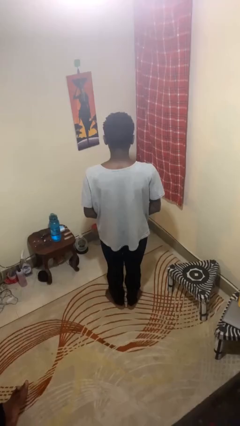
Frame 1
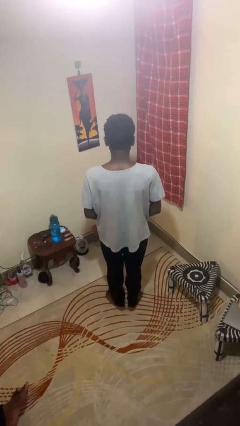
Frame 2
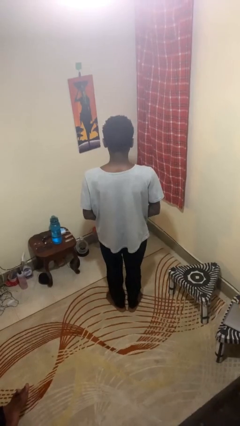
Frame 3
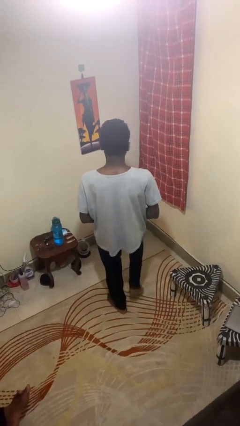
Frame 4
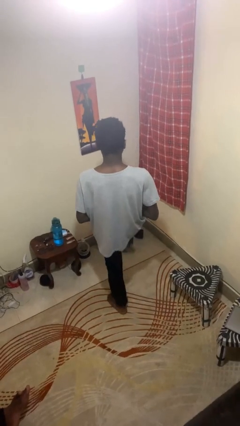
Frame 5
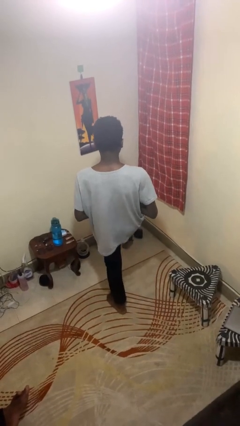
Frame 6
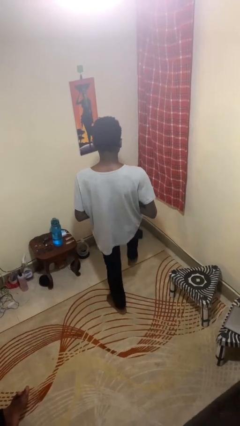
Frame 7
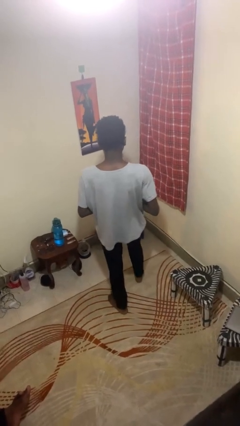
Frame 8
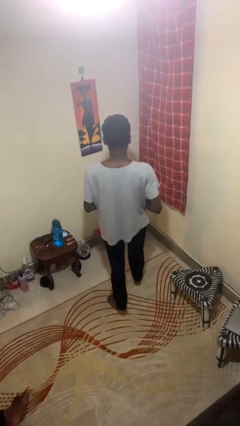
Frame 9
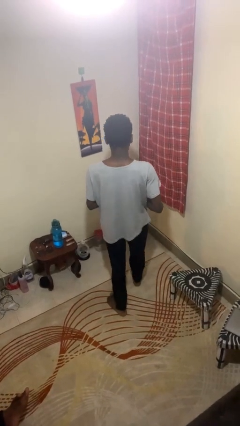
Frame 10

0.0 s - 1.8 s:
person karate kicks

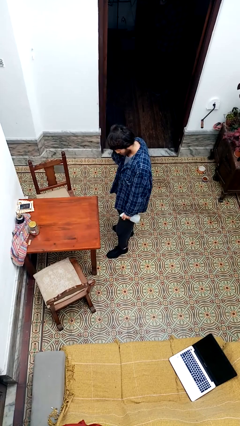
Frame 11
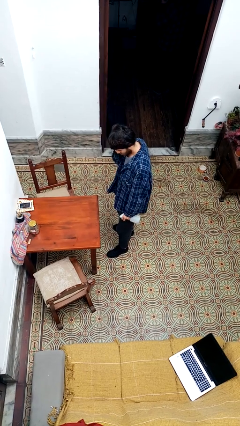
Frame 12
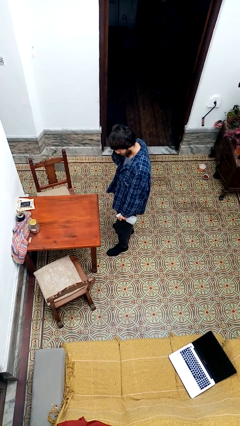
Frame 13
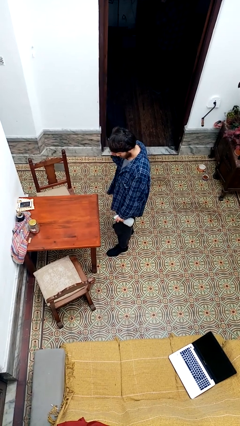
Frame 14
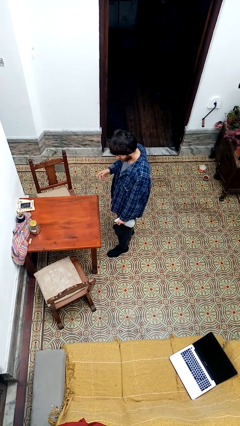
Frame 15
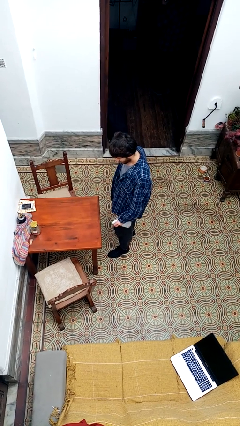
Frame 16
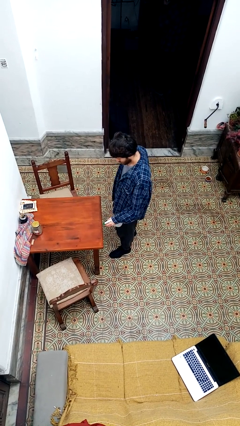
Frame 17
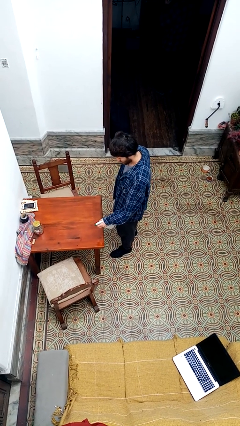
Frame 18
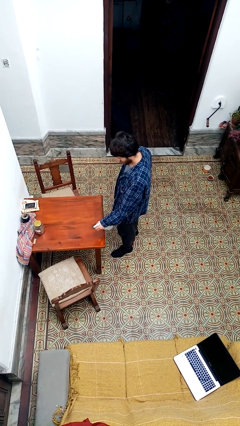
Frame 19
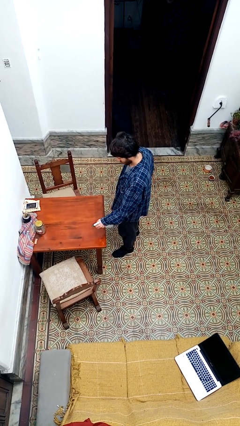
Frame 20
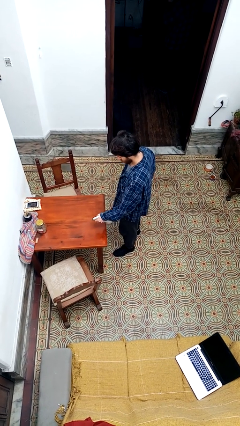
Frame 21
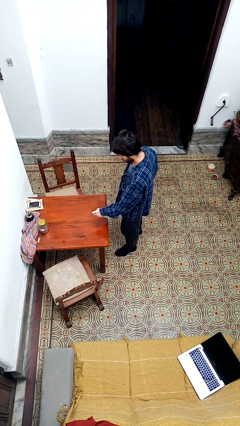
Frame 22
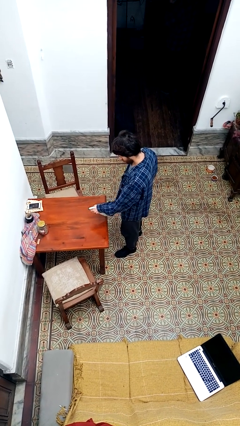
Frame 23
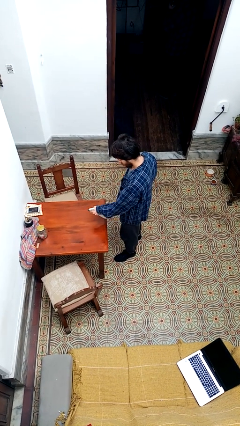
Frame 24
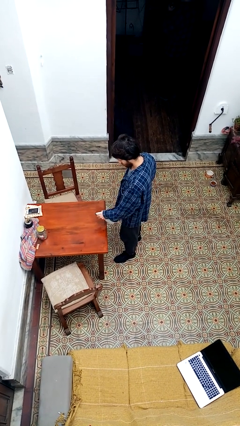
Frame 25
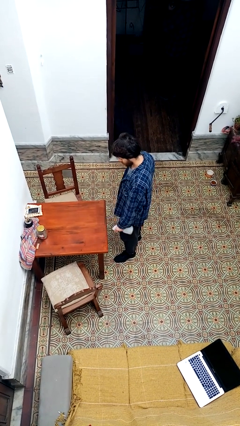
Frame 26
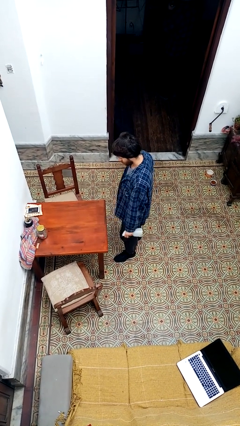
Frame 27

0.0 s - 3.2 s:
person sprays from bottle

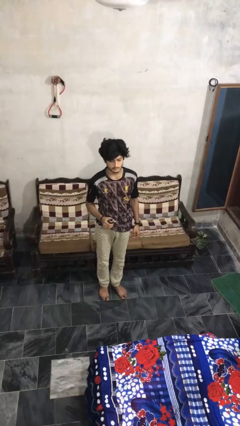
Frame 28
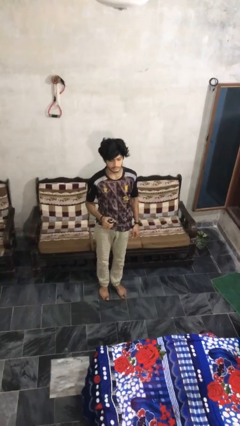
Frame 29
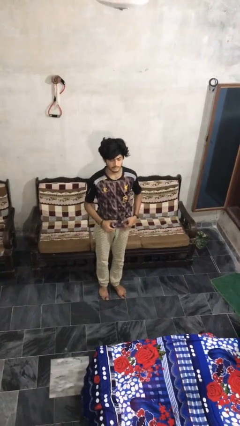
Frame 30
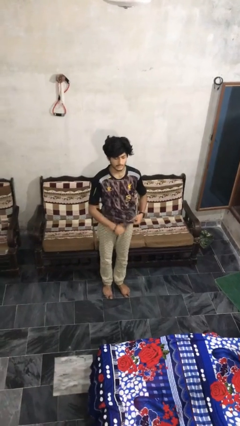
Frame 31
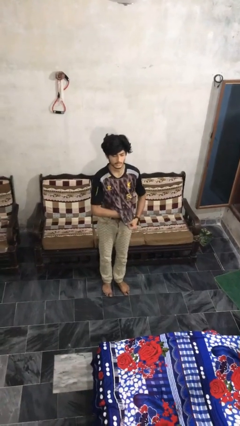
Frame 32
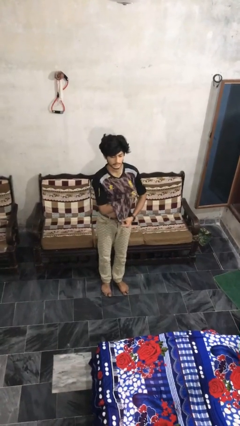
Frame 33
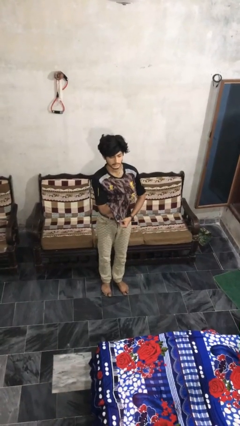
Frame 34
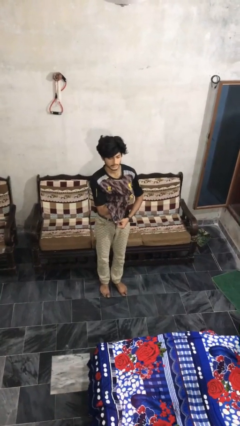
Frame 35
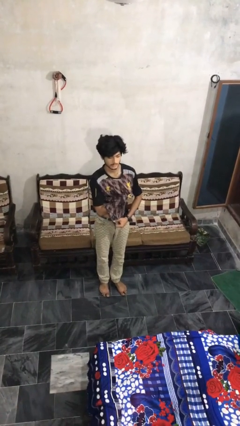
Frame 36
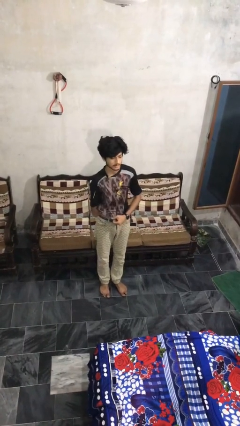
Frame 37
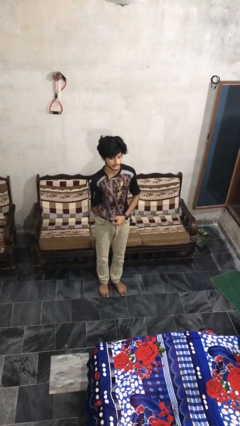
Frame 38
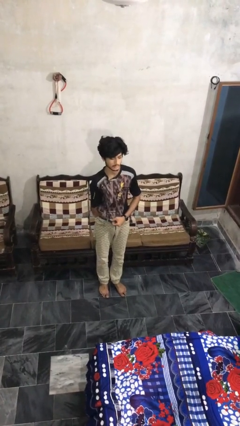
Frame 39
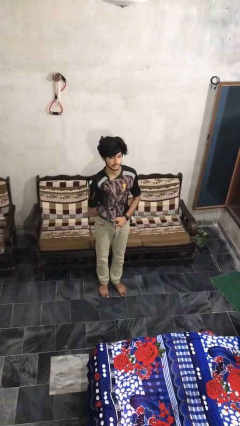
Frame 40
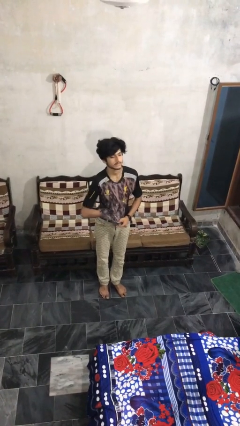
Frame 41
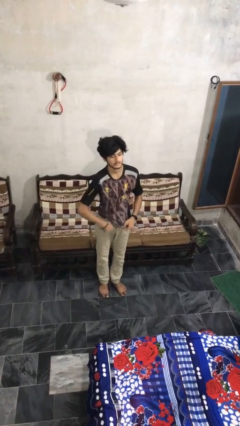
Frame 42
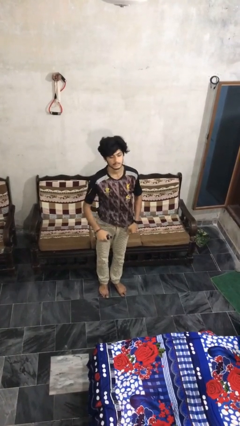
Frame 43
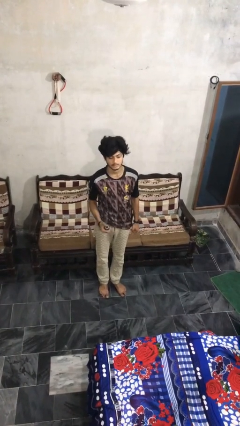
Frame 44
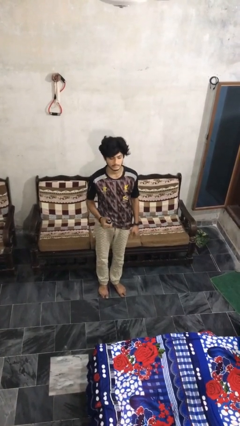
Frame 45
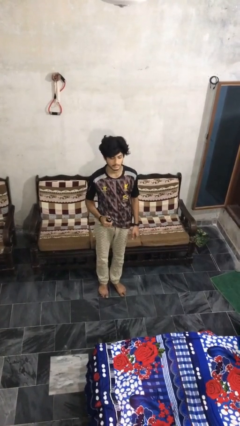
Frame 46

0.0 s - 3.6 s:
person applies deodorant

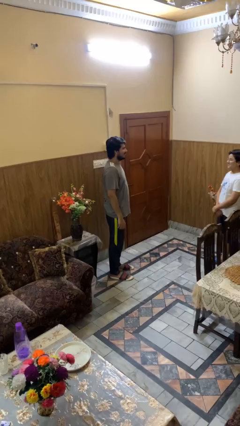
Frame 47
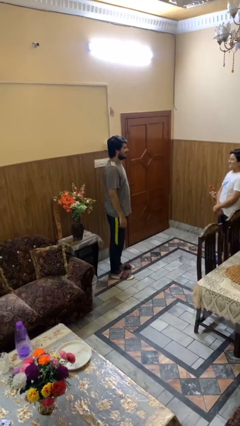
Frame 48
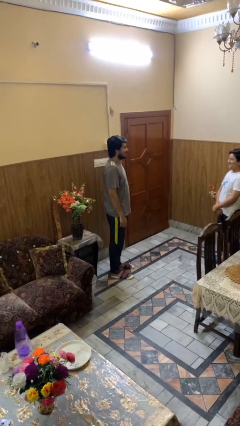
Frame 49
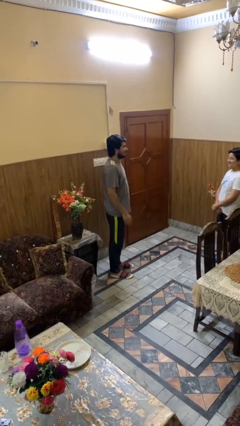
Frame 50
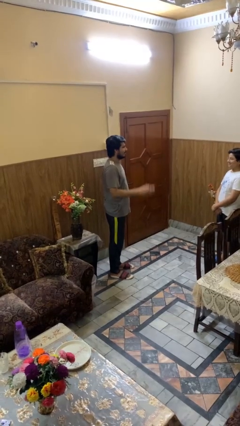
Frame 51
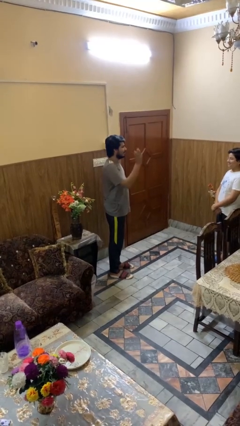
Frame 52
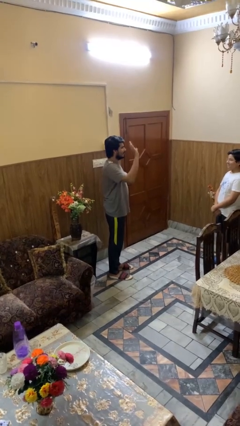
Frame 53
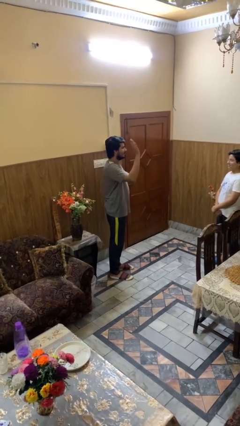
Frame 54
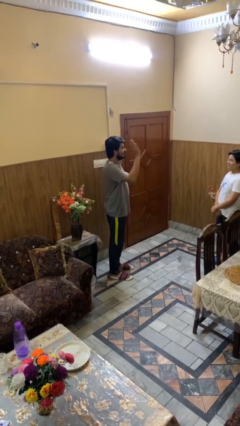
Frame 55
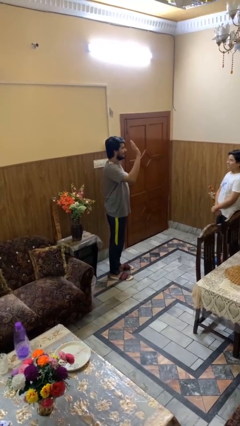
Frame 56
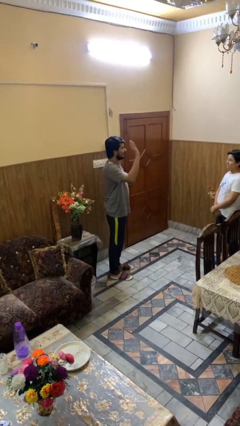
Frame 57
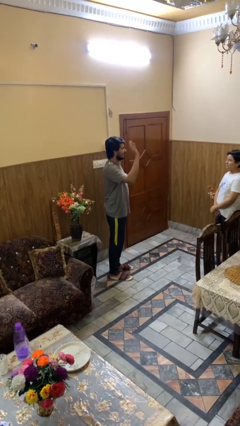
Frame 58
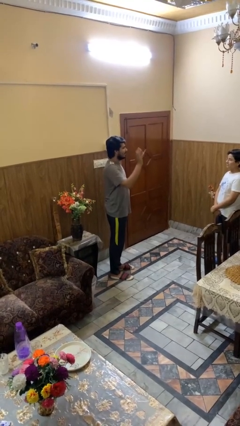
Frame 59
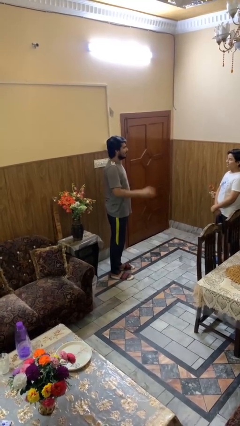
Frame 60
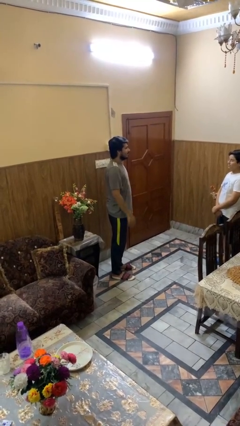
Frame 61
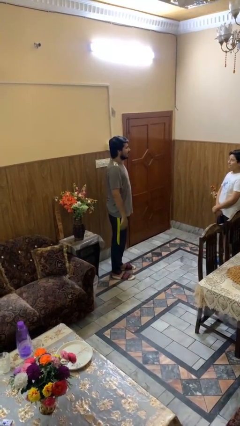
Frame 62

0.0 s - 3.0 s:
person waves at person

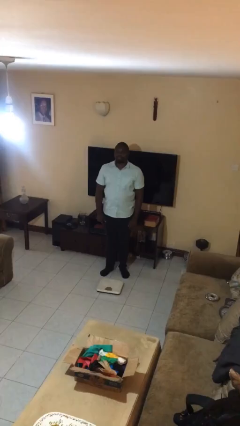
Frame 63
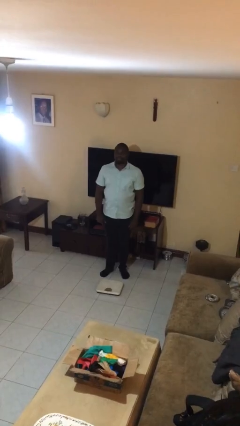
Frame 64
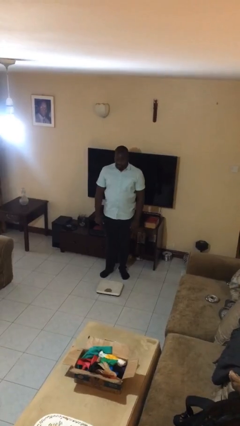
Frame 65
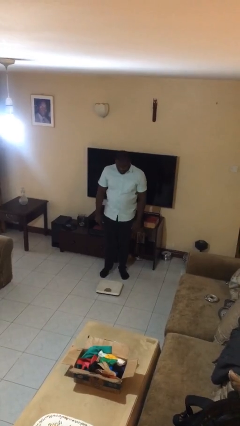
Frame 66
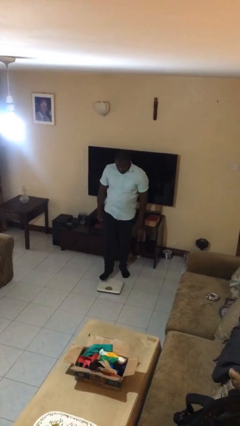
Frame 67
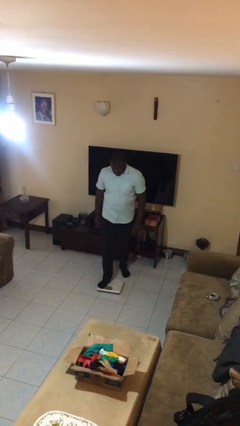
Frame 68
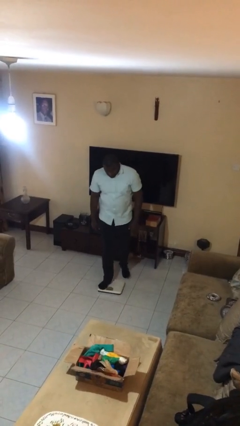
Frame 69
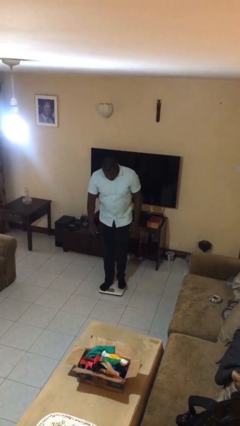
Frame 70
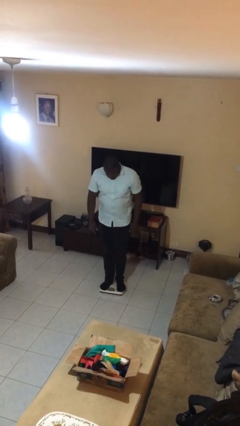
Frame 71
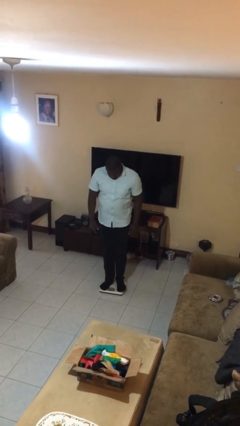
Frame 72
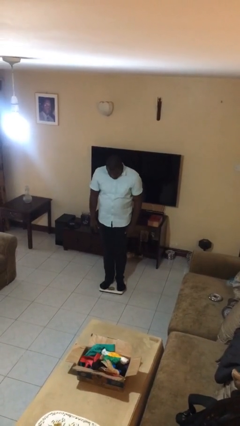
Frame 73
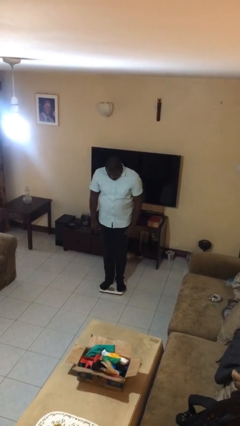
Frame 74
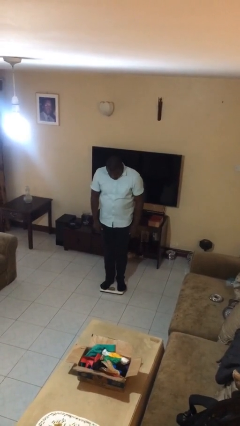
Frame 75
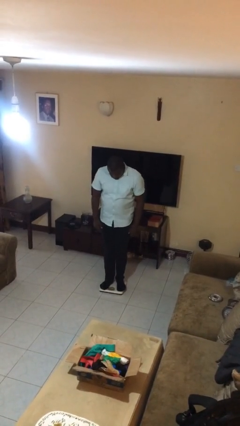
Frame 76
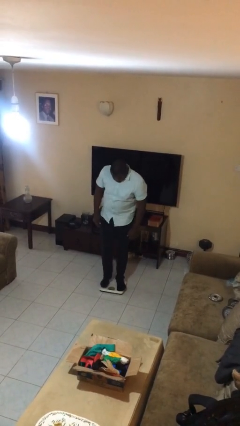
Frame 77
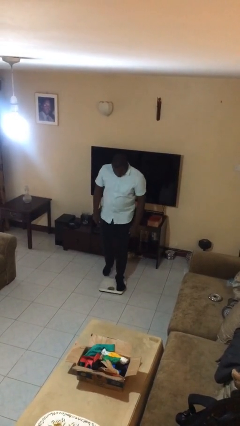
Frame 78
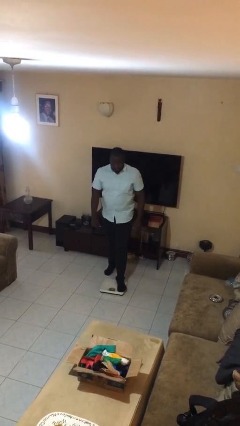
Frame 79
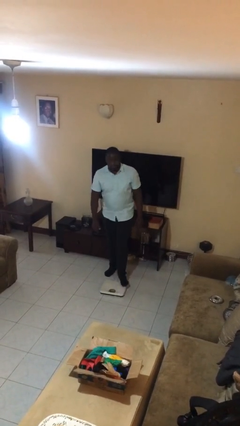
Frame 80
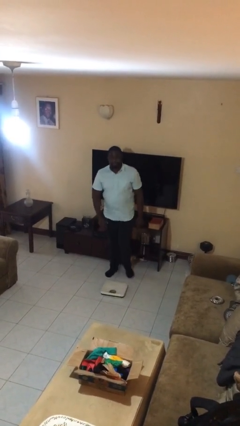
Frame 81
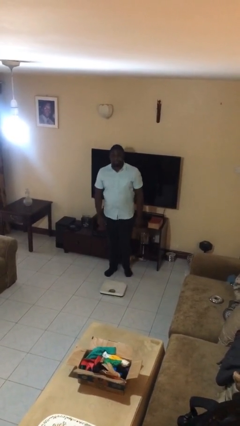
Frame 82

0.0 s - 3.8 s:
person uses bodyweight scale

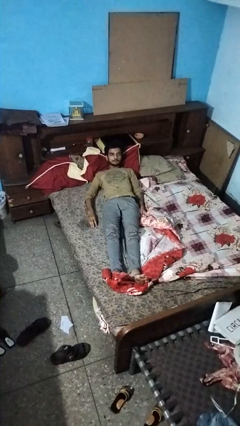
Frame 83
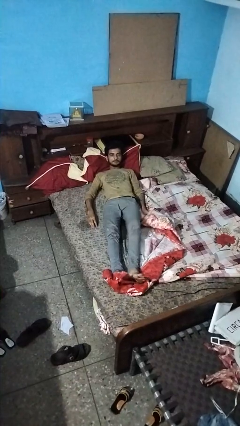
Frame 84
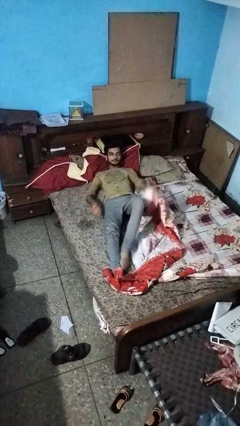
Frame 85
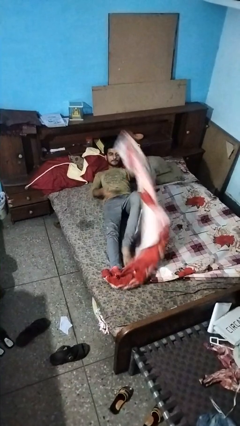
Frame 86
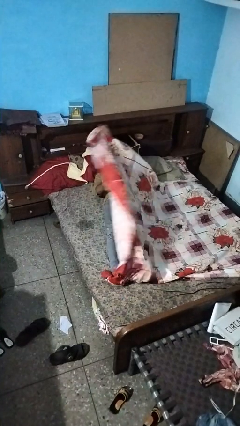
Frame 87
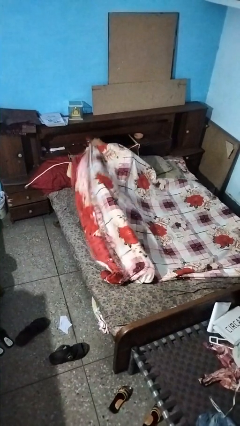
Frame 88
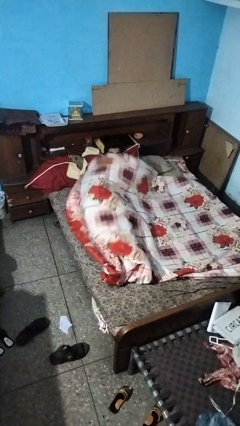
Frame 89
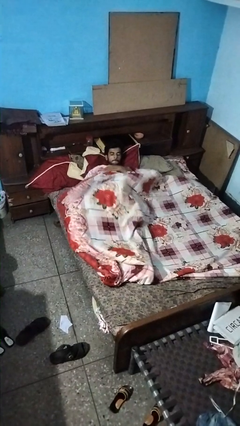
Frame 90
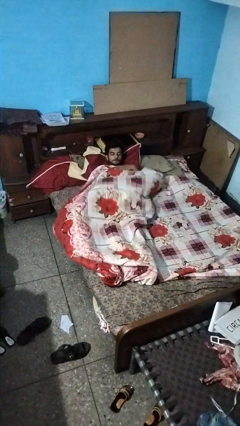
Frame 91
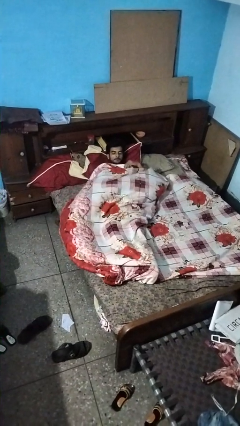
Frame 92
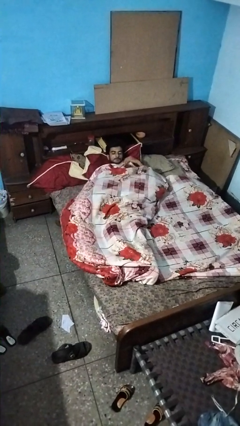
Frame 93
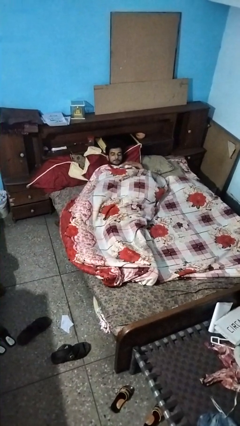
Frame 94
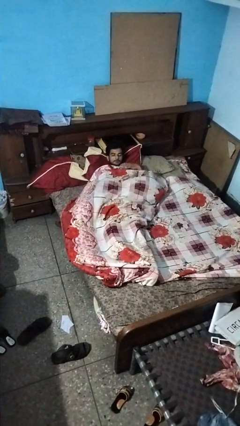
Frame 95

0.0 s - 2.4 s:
person covers with bedsheets
